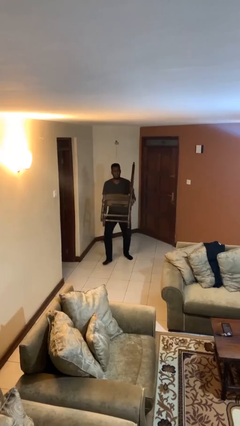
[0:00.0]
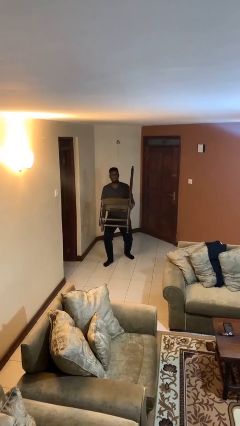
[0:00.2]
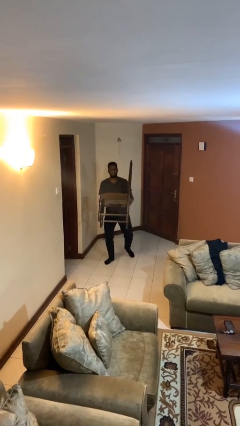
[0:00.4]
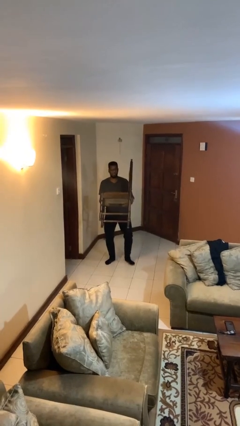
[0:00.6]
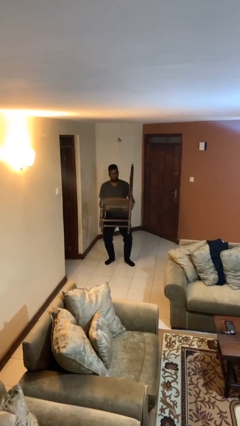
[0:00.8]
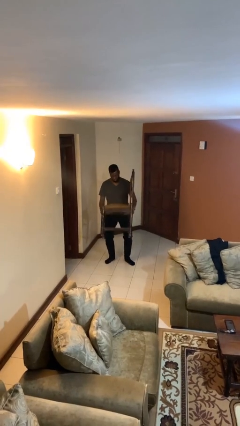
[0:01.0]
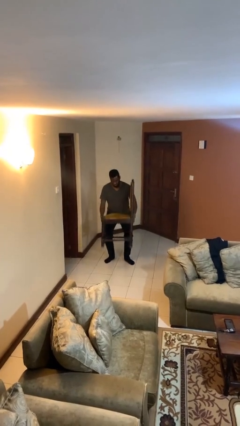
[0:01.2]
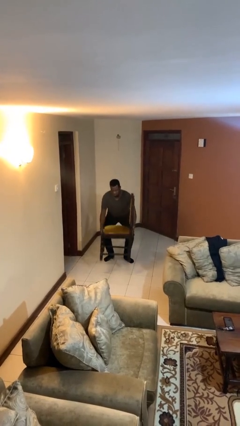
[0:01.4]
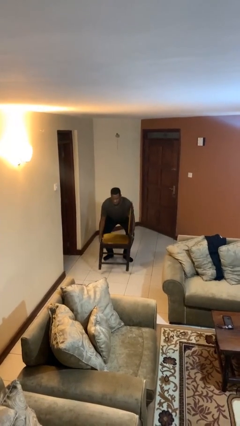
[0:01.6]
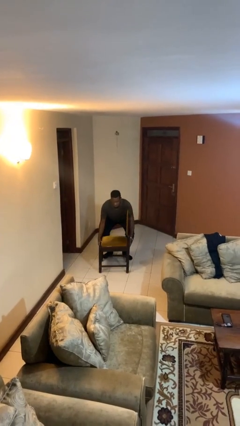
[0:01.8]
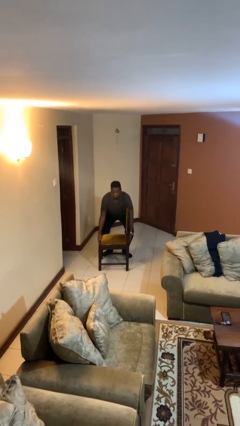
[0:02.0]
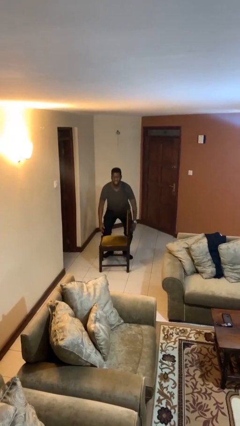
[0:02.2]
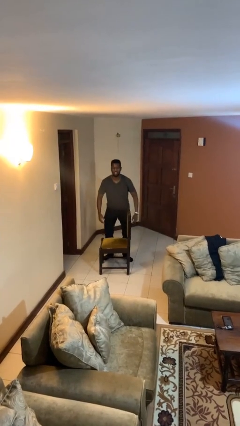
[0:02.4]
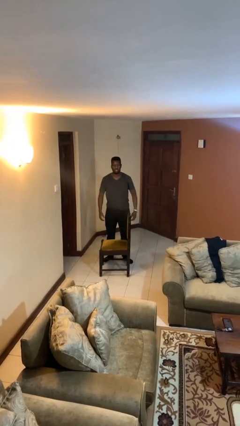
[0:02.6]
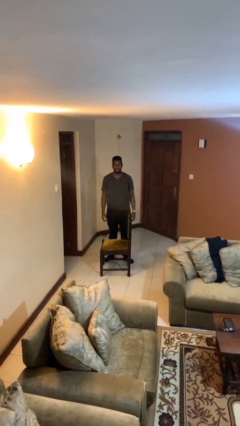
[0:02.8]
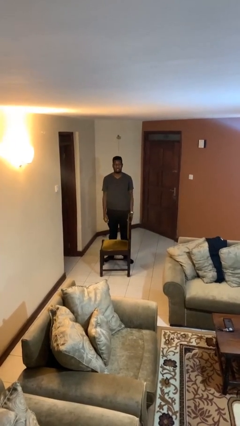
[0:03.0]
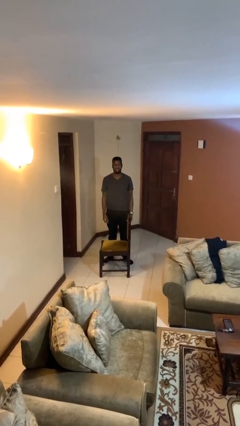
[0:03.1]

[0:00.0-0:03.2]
person puts down object on floor

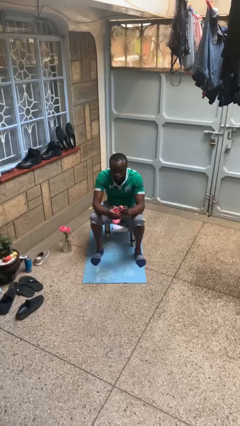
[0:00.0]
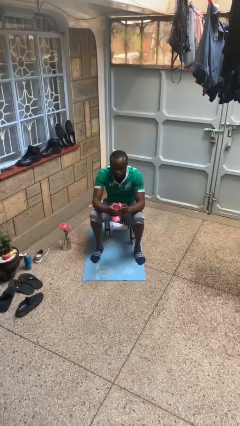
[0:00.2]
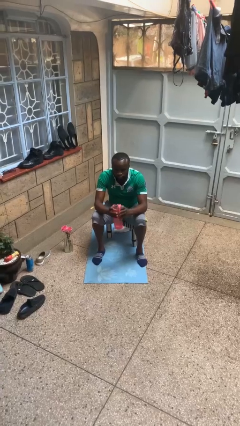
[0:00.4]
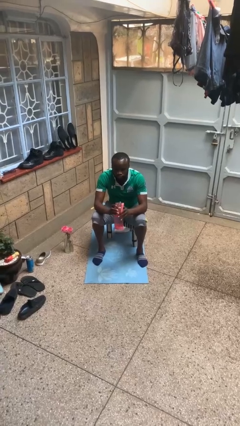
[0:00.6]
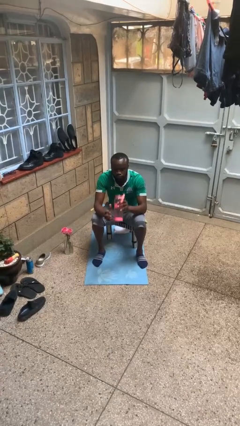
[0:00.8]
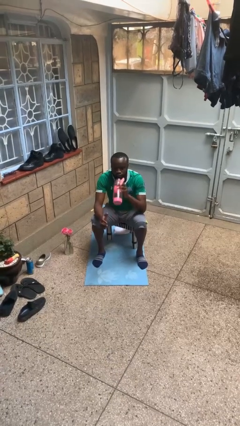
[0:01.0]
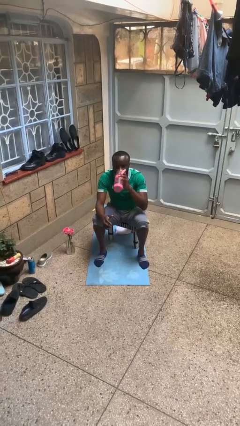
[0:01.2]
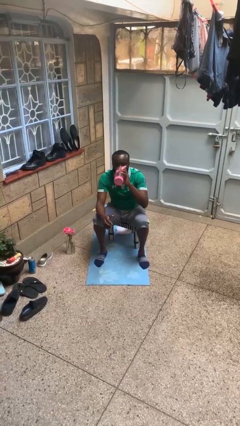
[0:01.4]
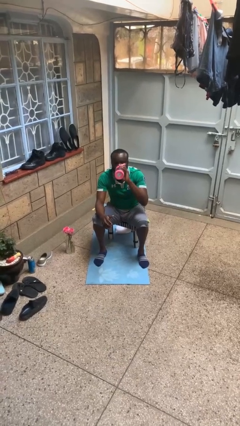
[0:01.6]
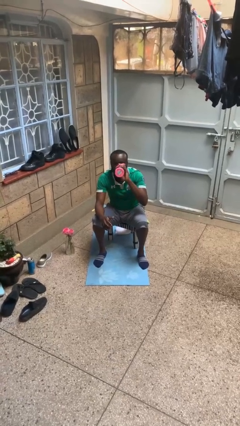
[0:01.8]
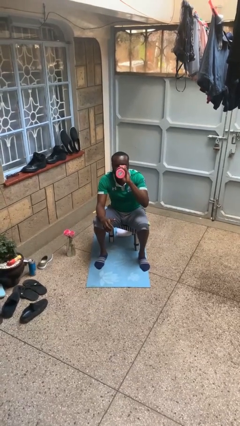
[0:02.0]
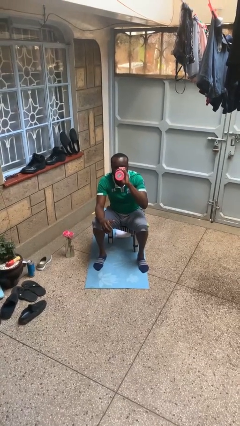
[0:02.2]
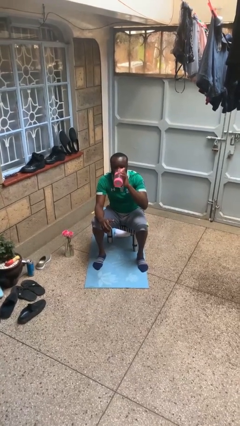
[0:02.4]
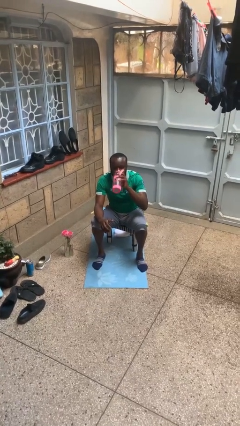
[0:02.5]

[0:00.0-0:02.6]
person drinks from bottle

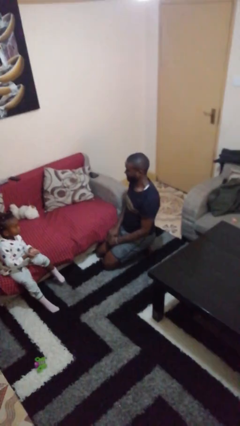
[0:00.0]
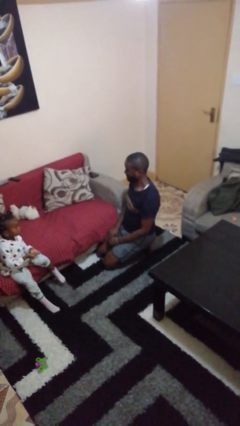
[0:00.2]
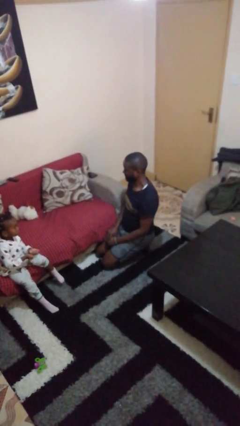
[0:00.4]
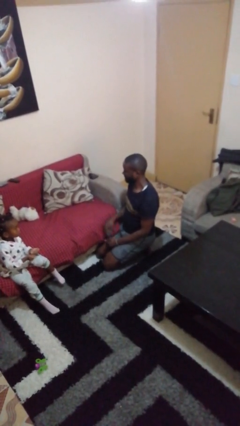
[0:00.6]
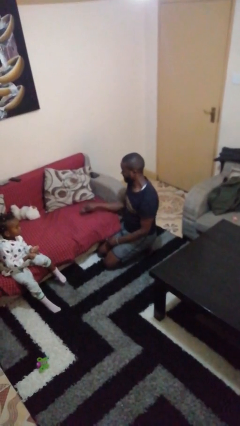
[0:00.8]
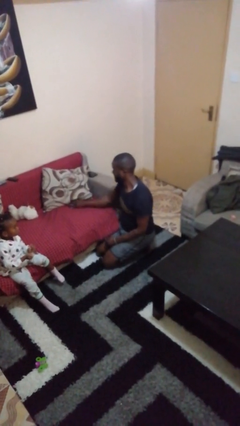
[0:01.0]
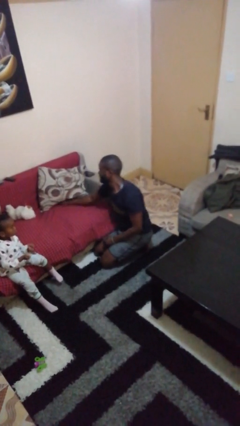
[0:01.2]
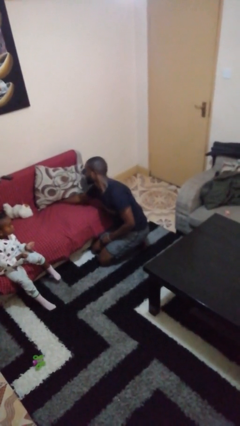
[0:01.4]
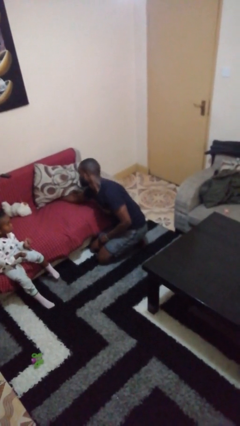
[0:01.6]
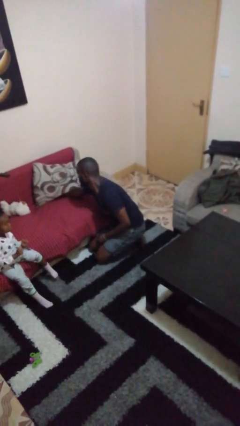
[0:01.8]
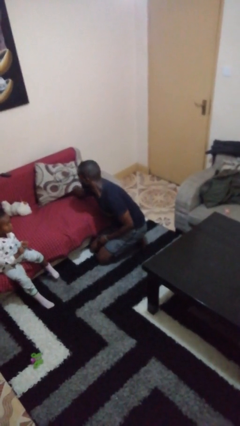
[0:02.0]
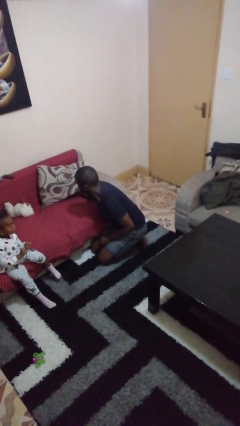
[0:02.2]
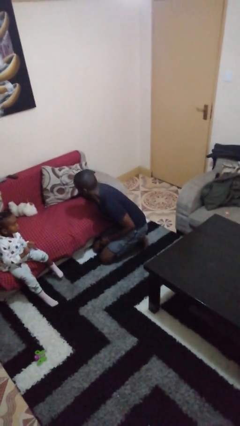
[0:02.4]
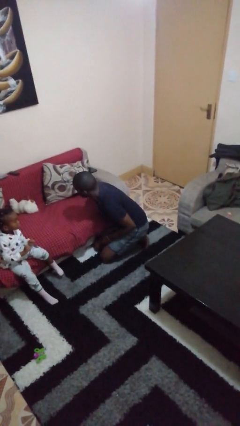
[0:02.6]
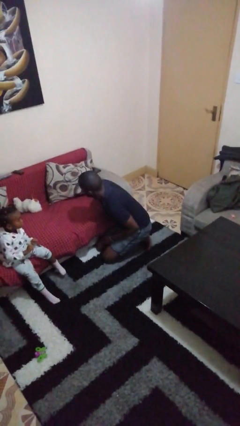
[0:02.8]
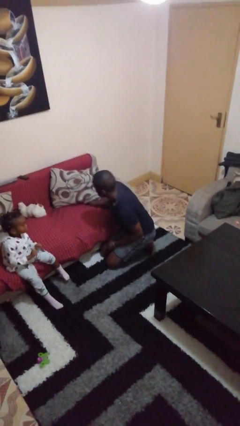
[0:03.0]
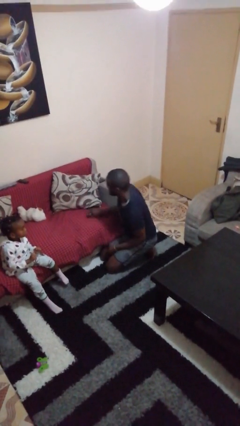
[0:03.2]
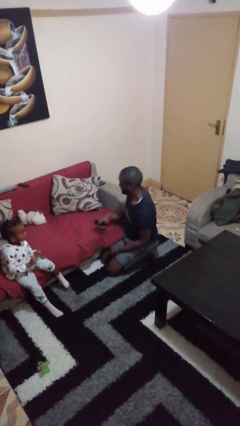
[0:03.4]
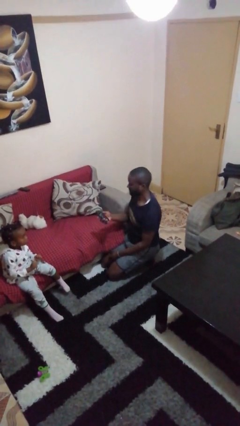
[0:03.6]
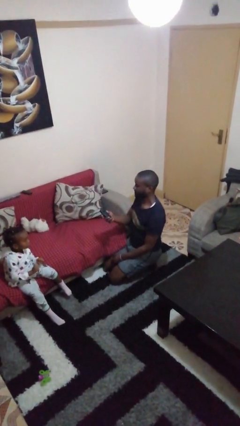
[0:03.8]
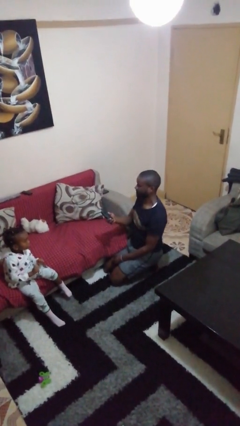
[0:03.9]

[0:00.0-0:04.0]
person searches in couch

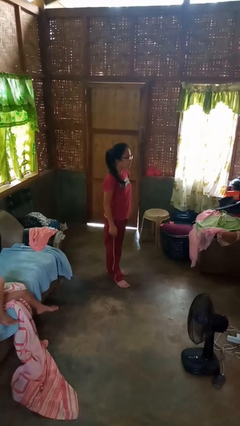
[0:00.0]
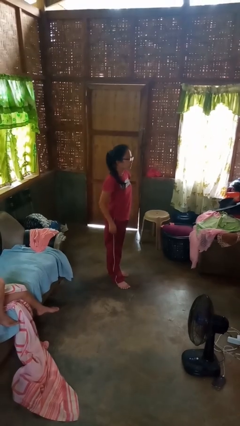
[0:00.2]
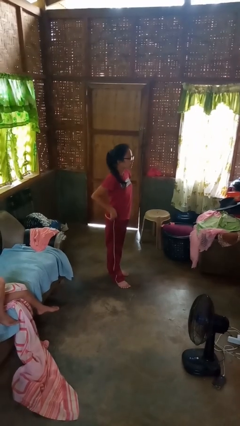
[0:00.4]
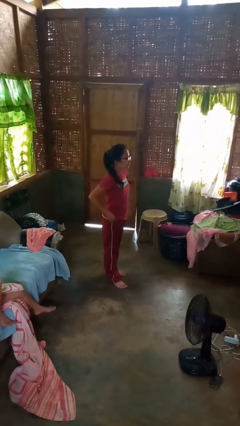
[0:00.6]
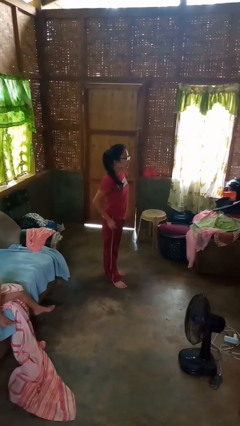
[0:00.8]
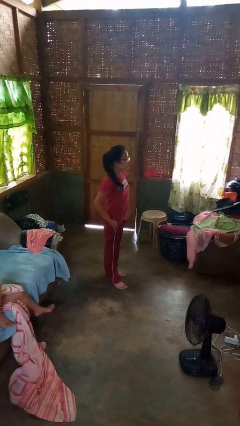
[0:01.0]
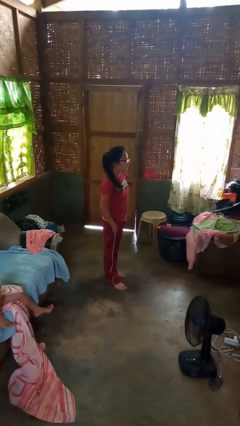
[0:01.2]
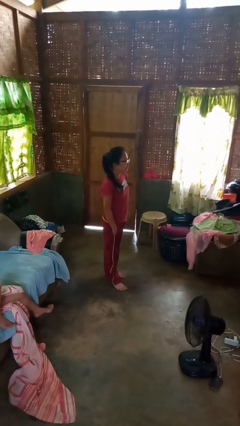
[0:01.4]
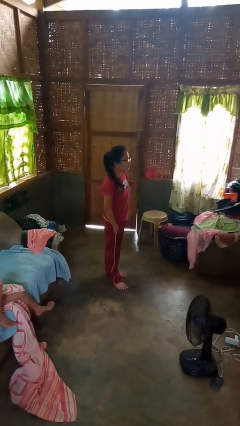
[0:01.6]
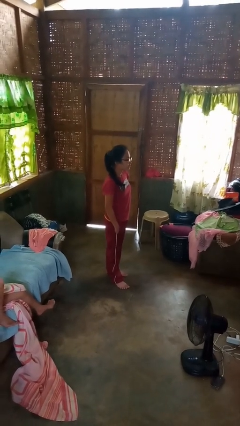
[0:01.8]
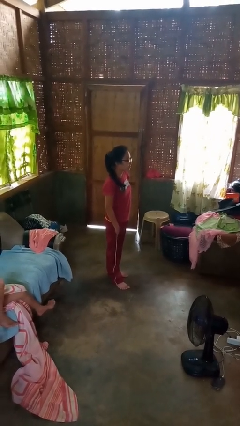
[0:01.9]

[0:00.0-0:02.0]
person puts hands in back pockets

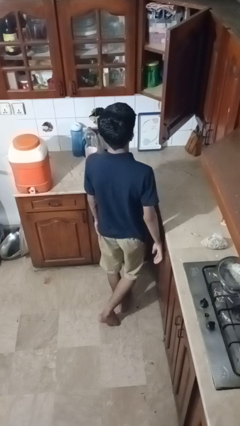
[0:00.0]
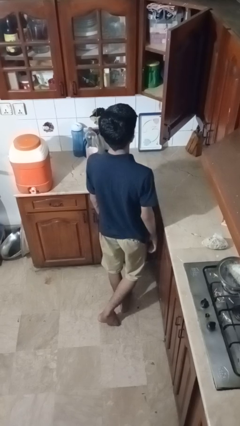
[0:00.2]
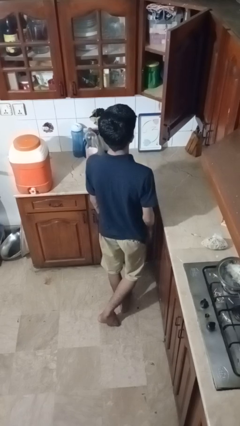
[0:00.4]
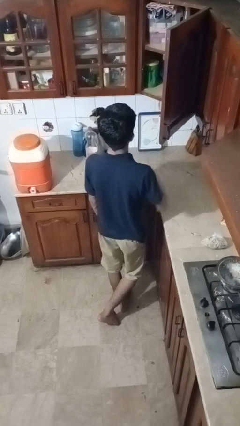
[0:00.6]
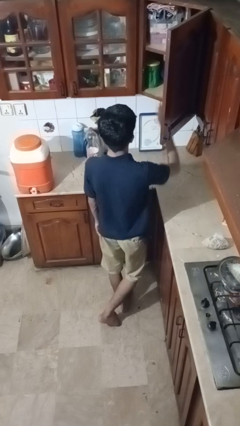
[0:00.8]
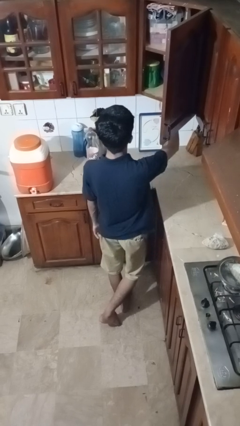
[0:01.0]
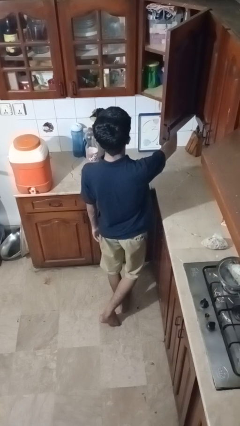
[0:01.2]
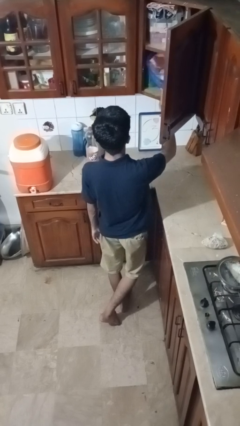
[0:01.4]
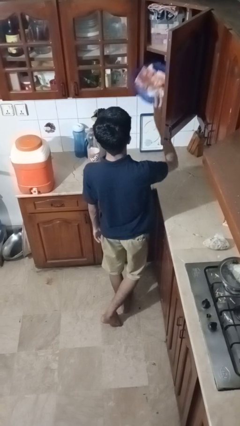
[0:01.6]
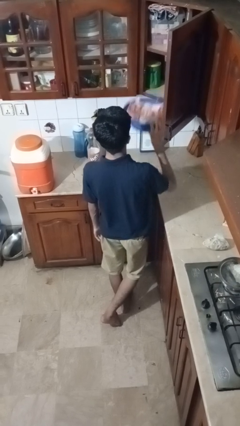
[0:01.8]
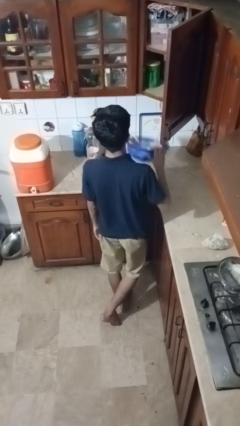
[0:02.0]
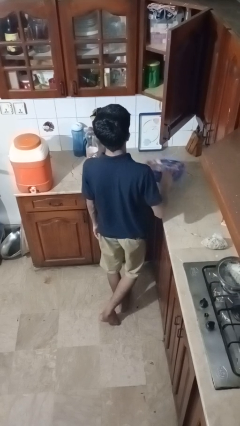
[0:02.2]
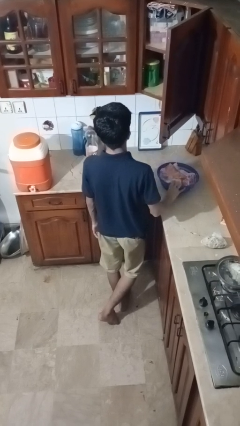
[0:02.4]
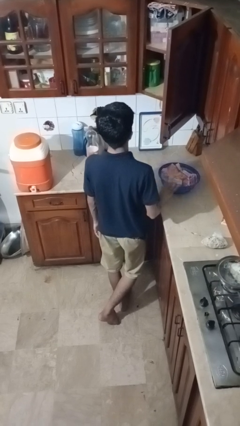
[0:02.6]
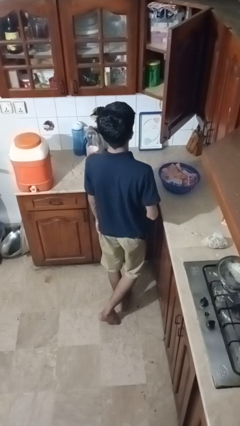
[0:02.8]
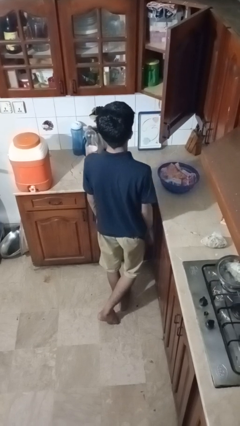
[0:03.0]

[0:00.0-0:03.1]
person takes object from cabinet

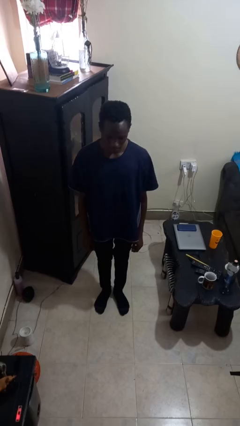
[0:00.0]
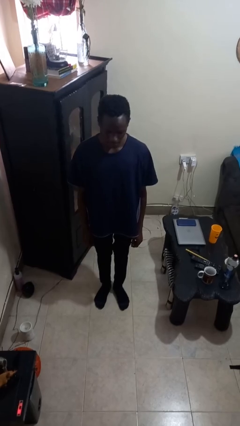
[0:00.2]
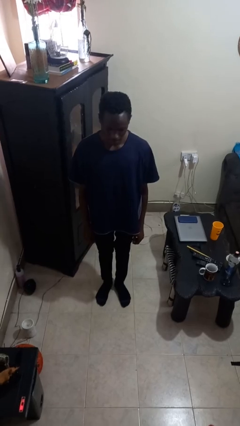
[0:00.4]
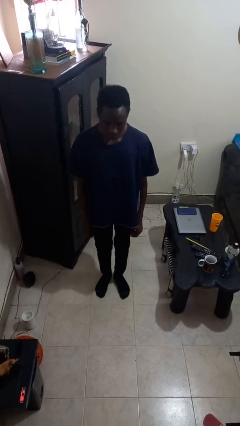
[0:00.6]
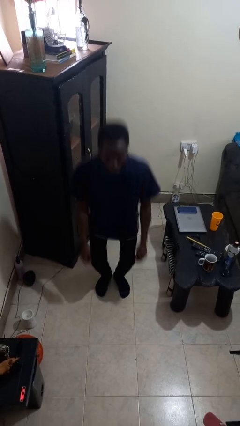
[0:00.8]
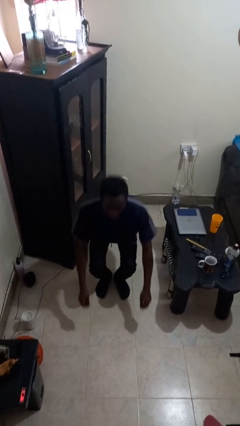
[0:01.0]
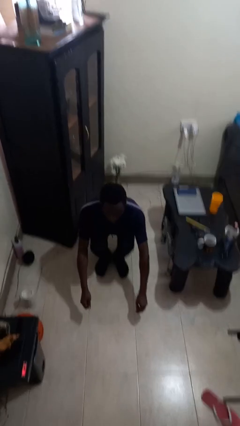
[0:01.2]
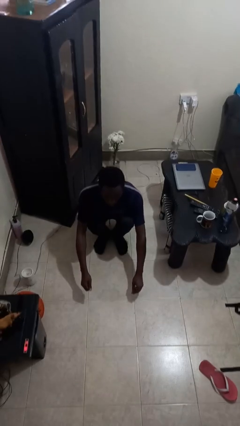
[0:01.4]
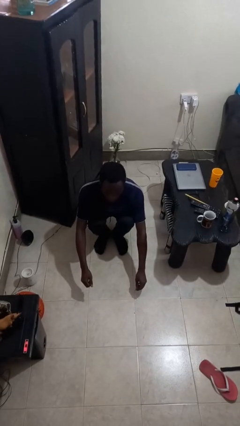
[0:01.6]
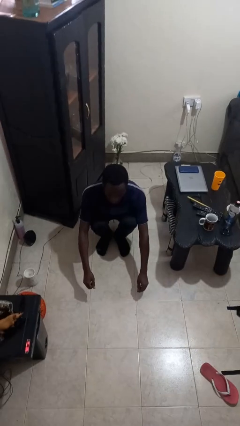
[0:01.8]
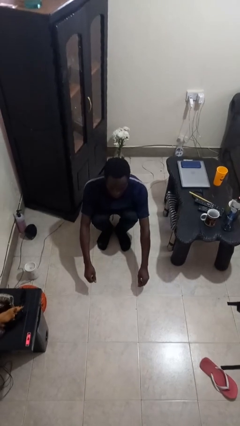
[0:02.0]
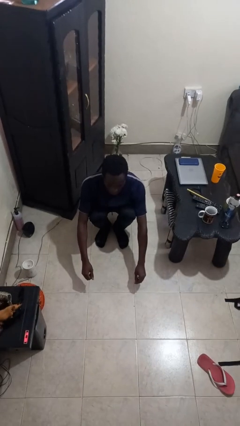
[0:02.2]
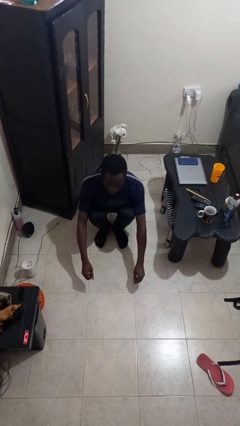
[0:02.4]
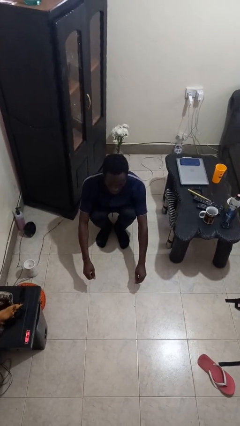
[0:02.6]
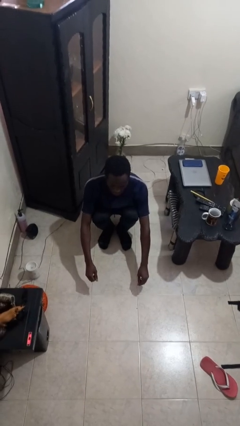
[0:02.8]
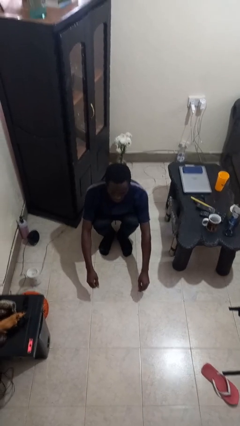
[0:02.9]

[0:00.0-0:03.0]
person squats
